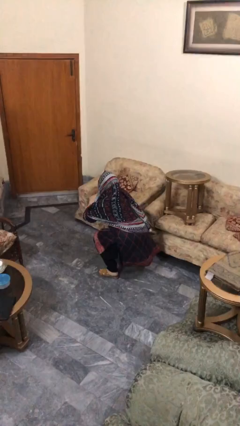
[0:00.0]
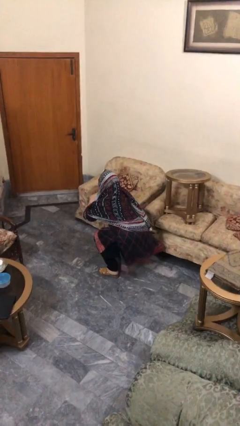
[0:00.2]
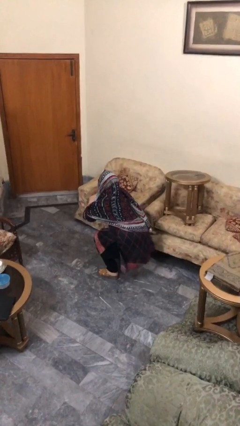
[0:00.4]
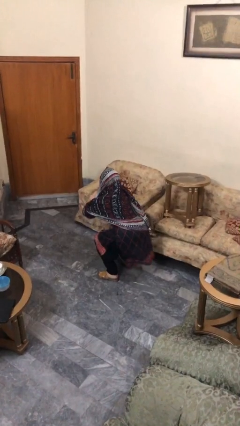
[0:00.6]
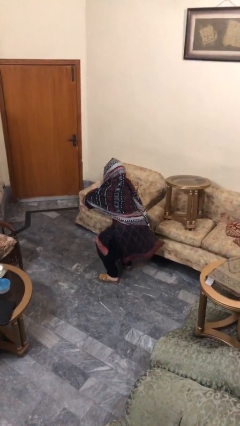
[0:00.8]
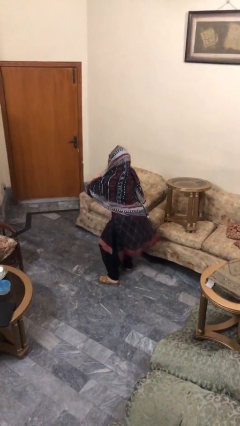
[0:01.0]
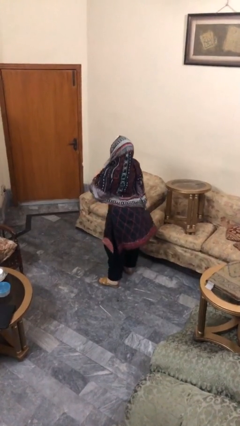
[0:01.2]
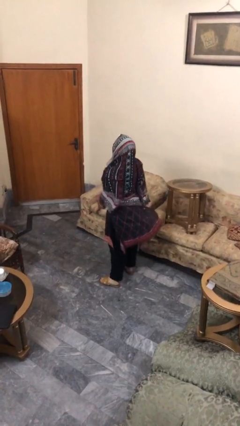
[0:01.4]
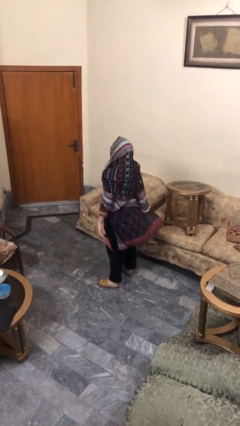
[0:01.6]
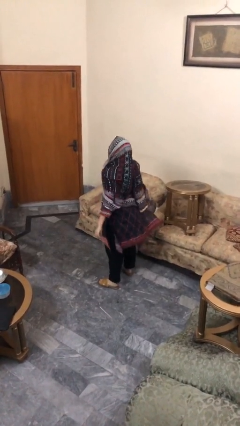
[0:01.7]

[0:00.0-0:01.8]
person stands up

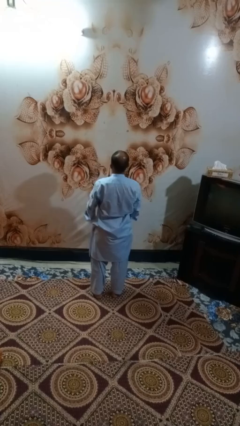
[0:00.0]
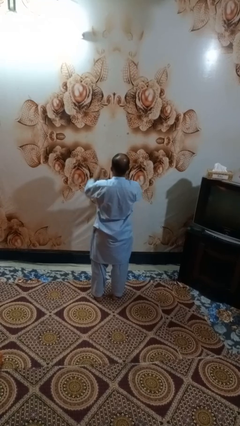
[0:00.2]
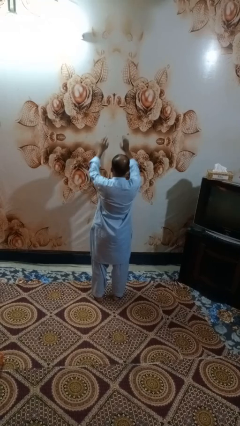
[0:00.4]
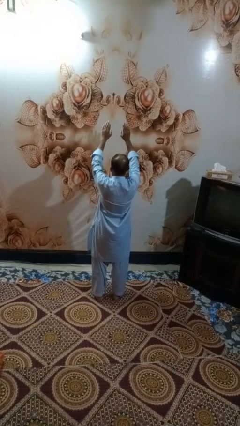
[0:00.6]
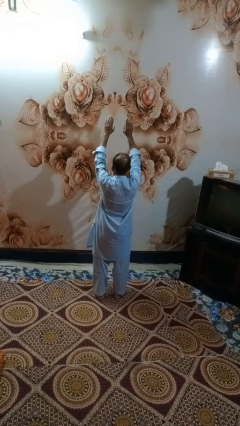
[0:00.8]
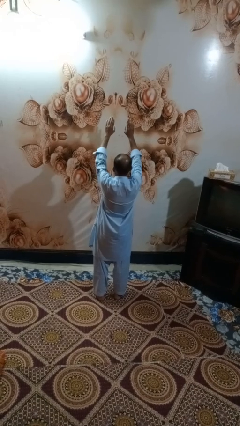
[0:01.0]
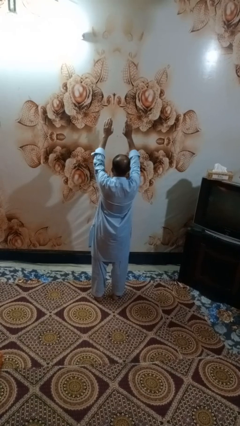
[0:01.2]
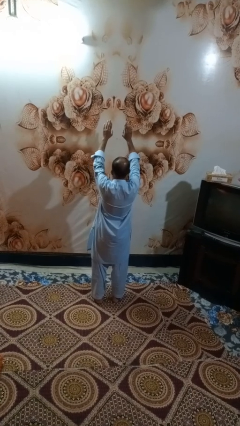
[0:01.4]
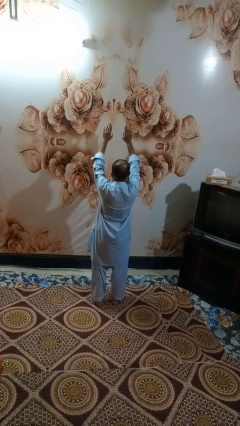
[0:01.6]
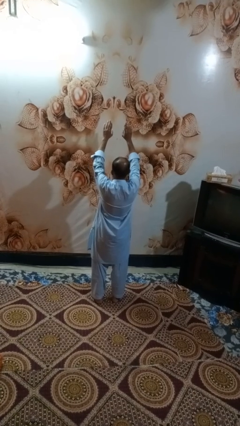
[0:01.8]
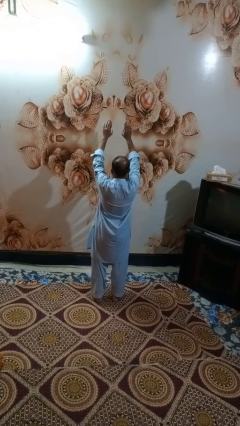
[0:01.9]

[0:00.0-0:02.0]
person gestures swipe up

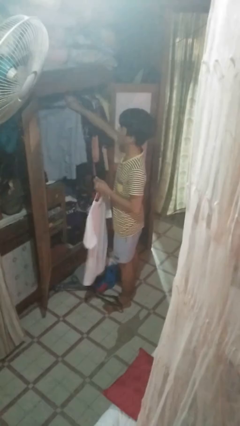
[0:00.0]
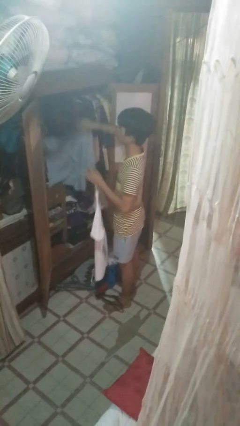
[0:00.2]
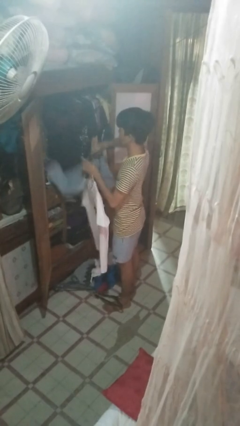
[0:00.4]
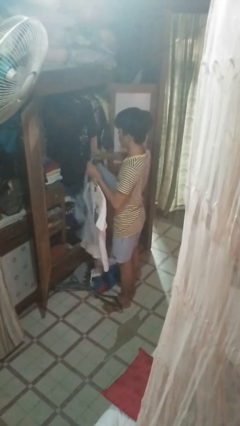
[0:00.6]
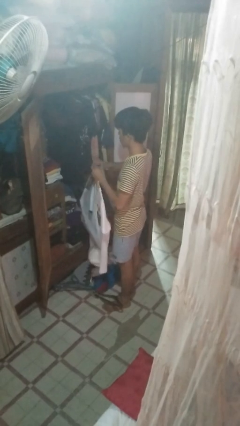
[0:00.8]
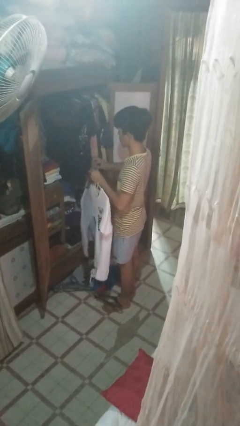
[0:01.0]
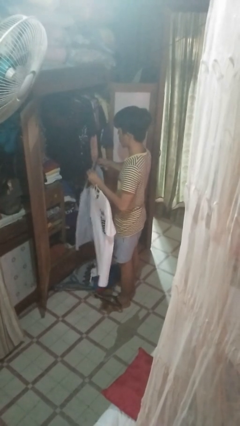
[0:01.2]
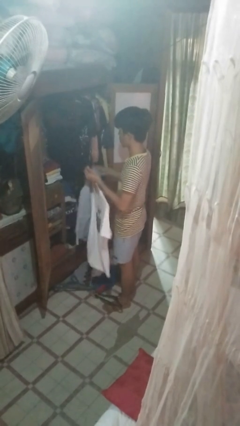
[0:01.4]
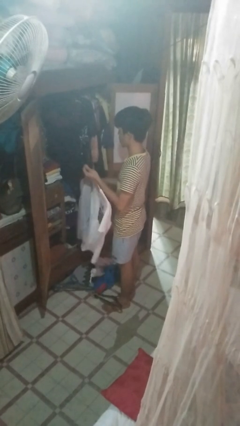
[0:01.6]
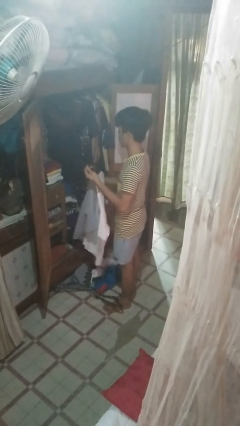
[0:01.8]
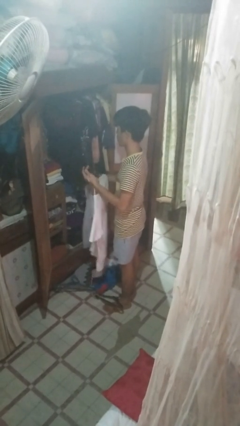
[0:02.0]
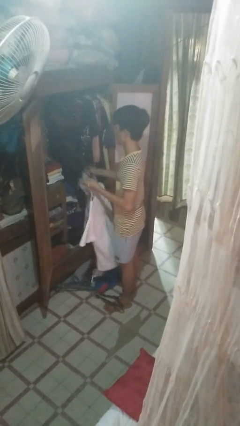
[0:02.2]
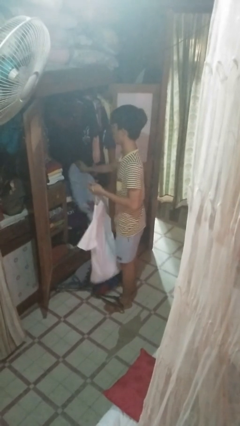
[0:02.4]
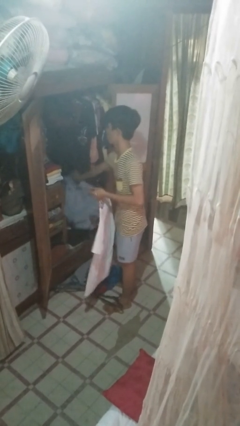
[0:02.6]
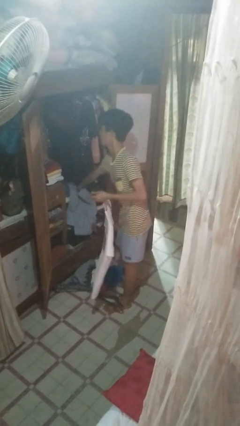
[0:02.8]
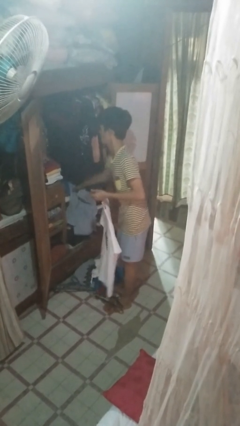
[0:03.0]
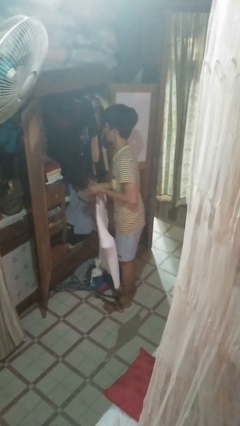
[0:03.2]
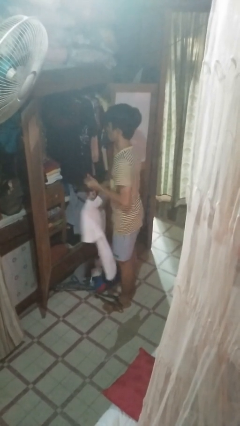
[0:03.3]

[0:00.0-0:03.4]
person takes clothes from closet

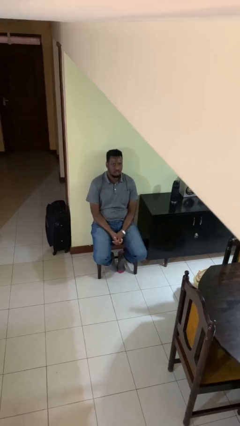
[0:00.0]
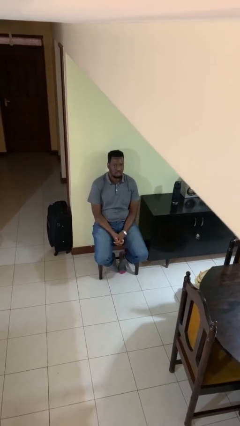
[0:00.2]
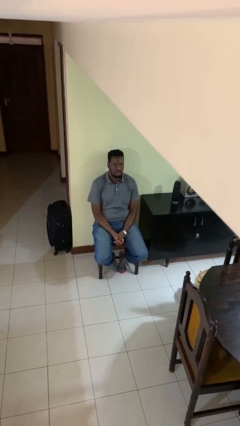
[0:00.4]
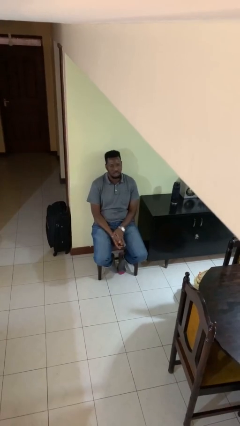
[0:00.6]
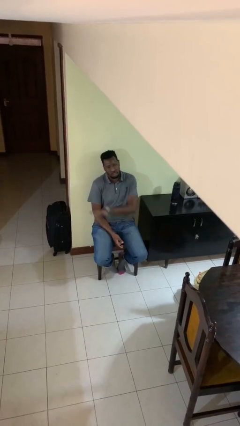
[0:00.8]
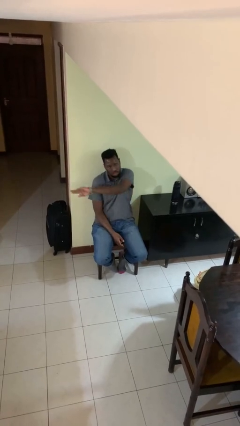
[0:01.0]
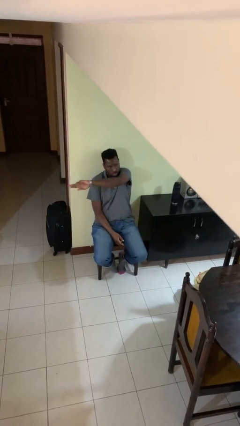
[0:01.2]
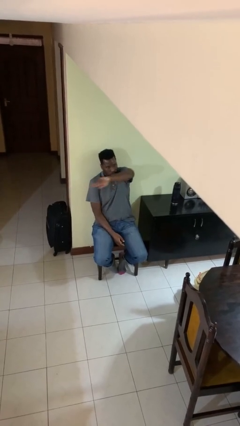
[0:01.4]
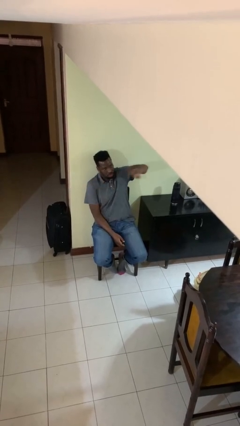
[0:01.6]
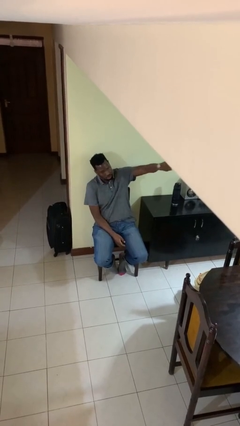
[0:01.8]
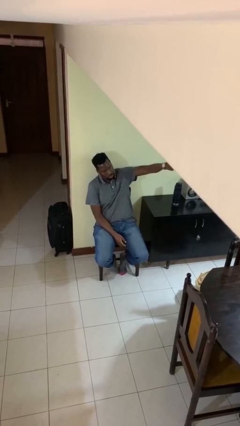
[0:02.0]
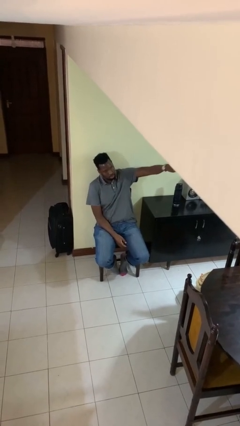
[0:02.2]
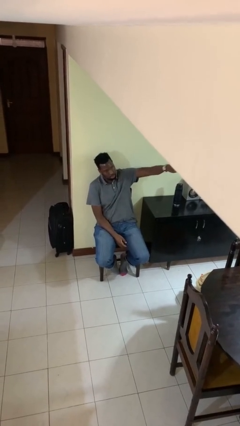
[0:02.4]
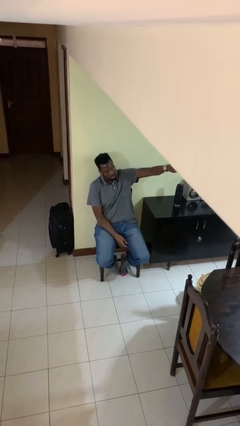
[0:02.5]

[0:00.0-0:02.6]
person gestures swipe left

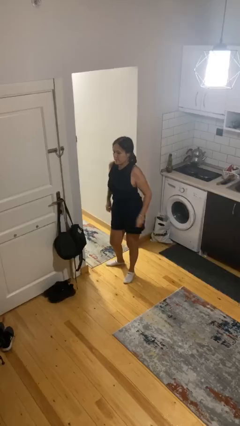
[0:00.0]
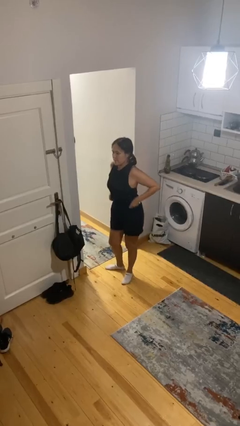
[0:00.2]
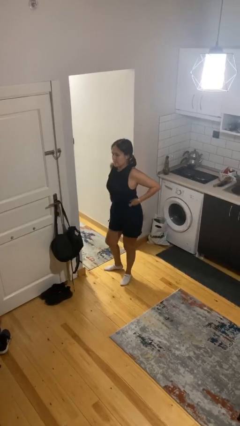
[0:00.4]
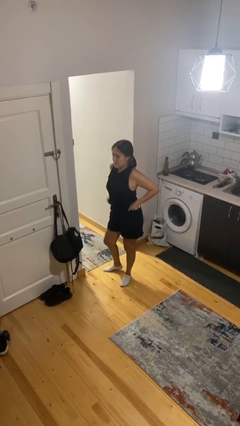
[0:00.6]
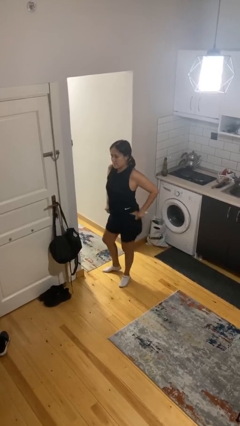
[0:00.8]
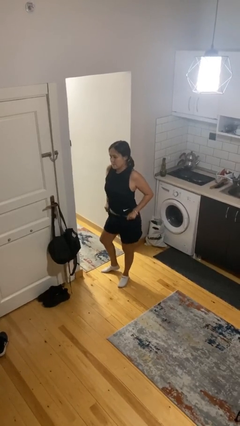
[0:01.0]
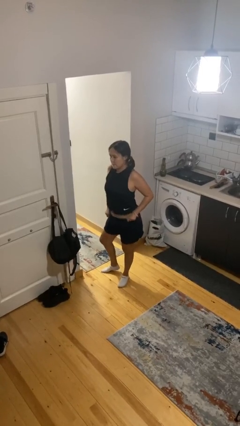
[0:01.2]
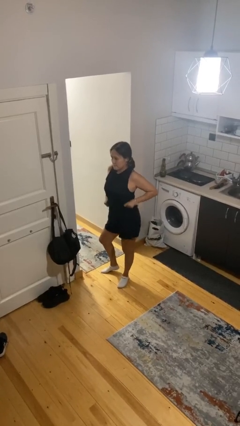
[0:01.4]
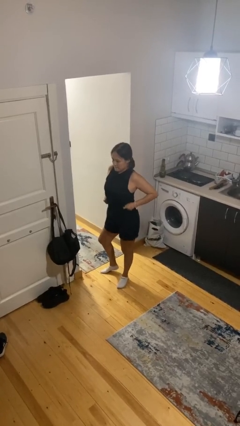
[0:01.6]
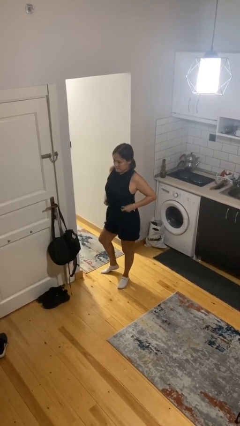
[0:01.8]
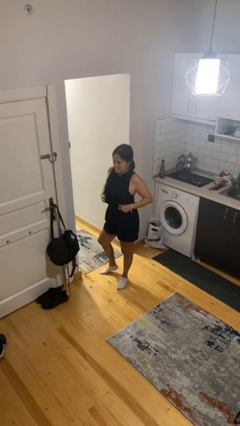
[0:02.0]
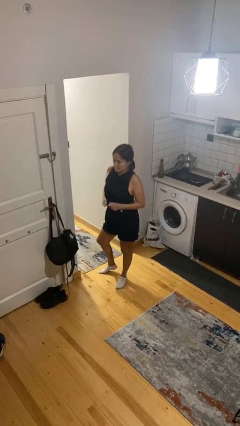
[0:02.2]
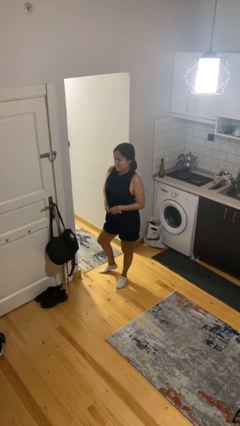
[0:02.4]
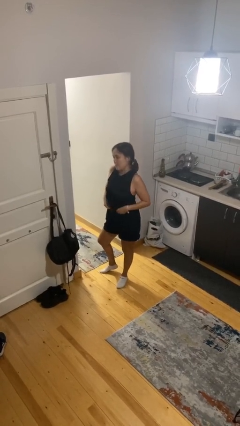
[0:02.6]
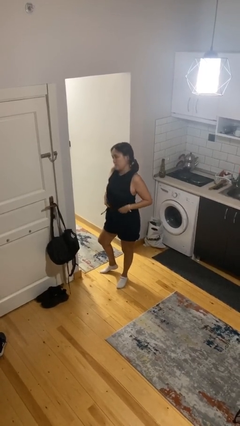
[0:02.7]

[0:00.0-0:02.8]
person hikes up pants

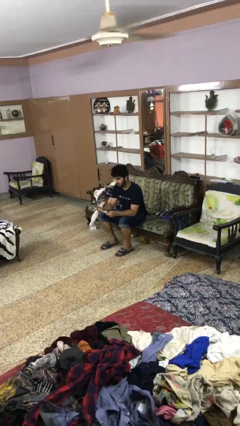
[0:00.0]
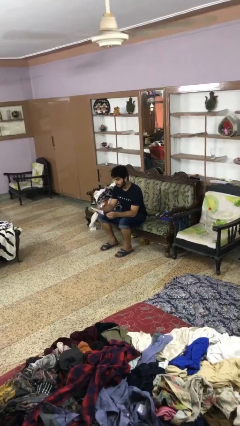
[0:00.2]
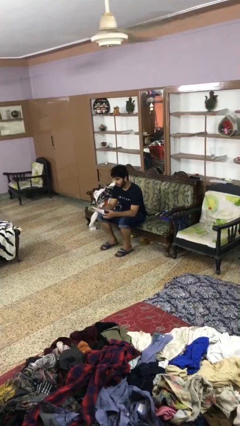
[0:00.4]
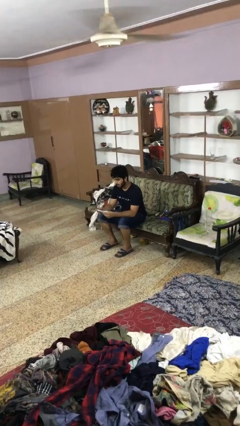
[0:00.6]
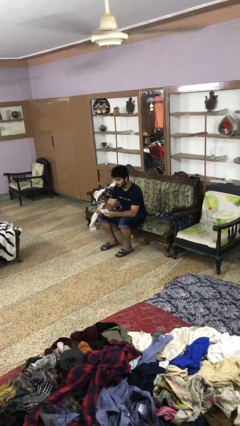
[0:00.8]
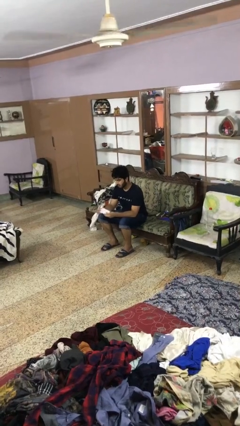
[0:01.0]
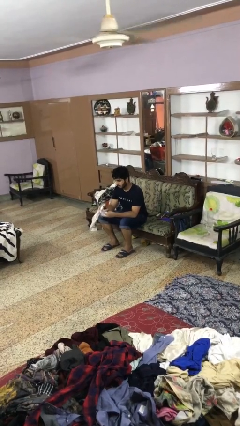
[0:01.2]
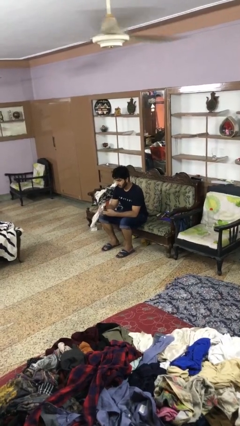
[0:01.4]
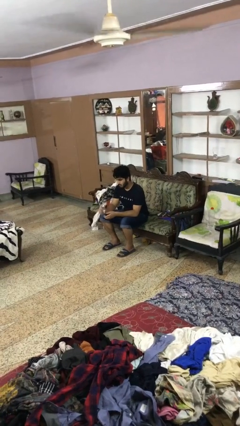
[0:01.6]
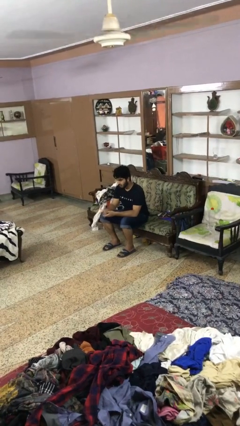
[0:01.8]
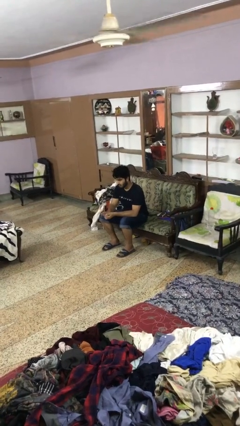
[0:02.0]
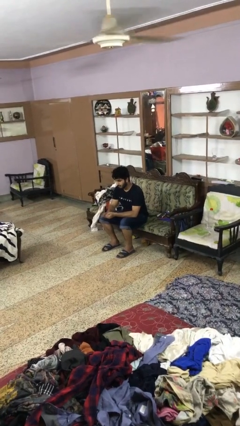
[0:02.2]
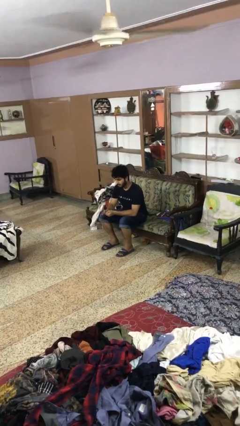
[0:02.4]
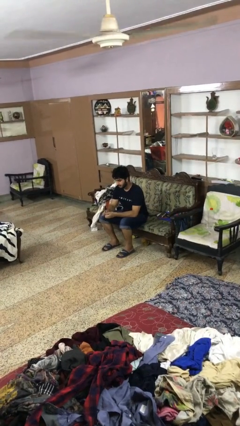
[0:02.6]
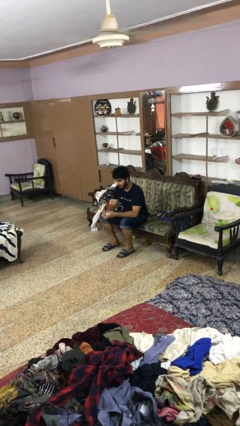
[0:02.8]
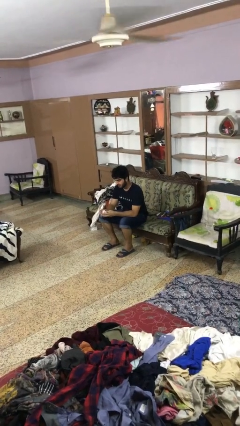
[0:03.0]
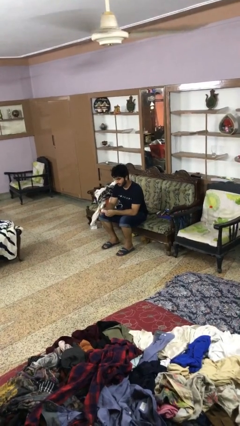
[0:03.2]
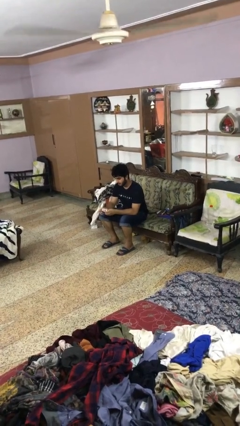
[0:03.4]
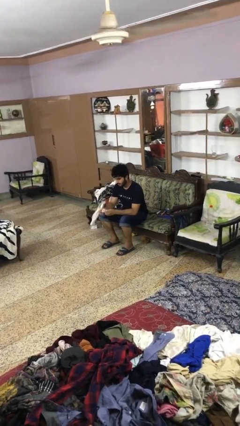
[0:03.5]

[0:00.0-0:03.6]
person crumples paper

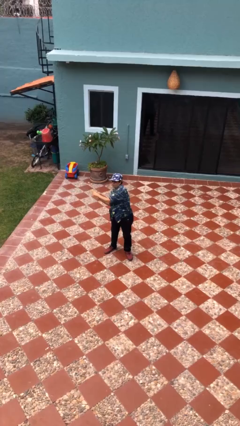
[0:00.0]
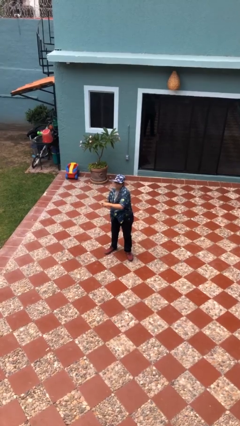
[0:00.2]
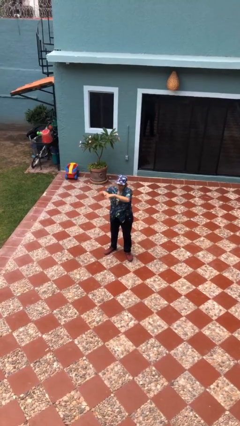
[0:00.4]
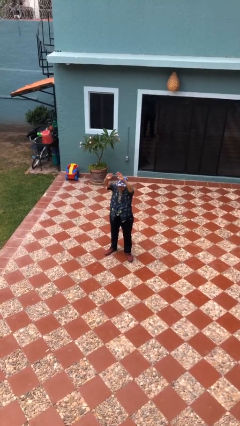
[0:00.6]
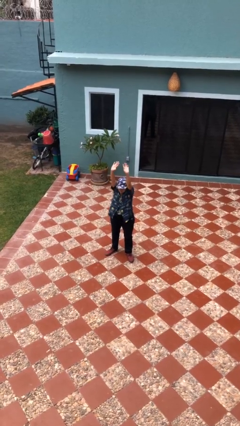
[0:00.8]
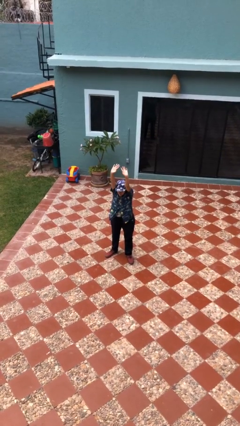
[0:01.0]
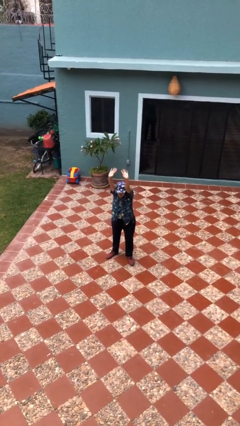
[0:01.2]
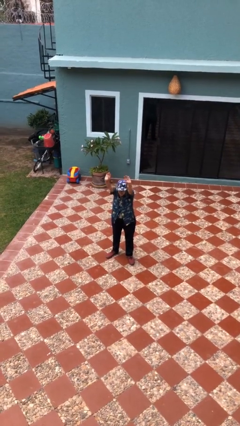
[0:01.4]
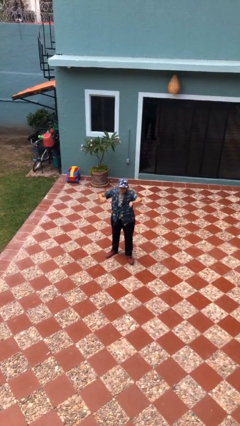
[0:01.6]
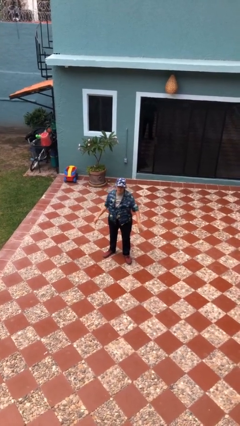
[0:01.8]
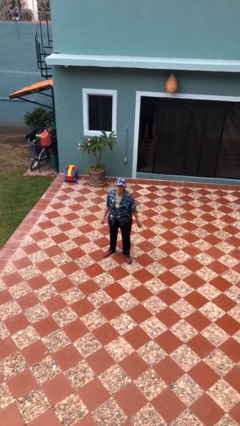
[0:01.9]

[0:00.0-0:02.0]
person stretches arms over head
